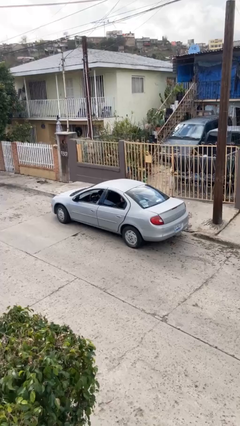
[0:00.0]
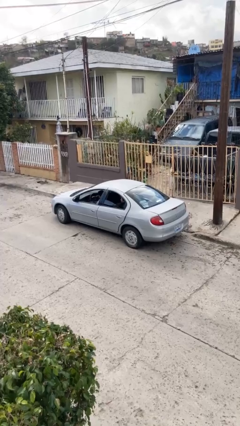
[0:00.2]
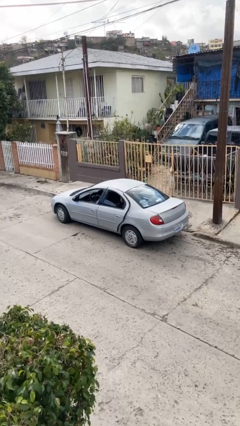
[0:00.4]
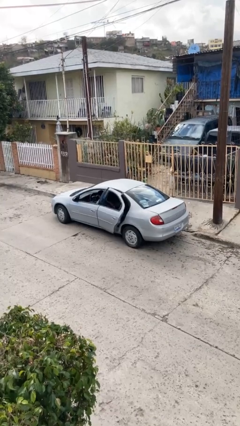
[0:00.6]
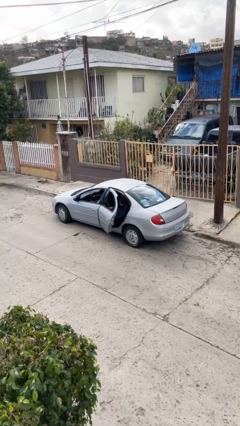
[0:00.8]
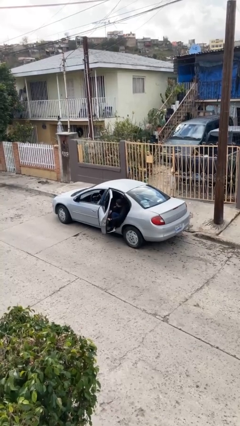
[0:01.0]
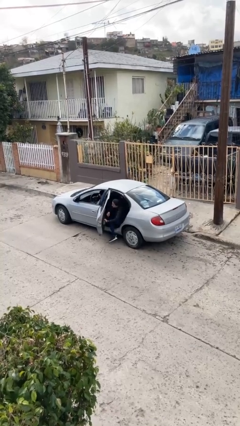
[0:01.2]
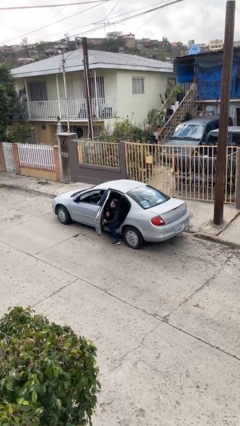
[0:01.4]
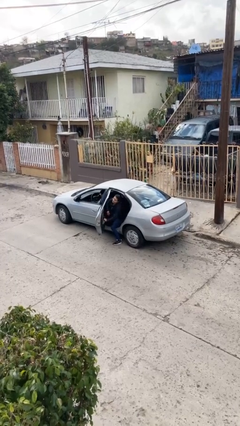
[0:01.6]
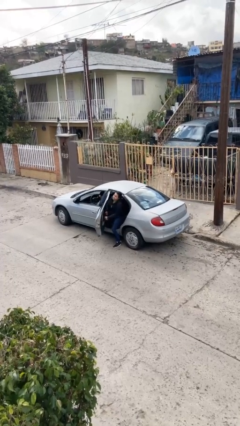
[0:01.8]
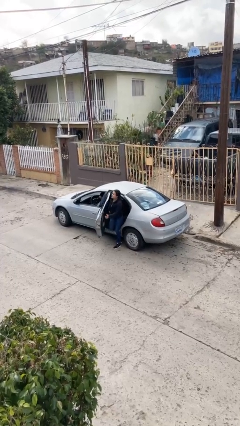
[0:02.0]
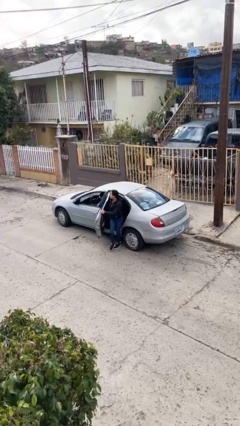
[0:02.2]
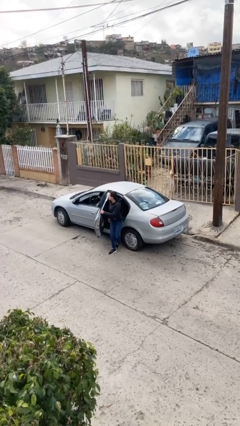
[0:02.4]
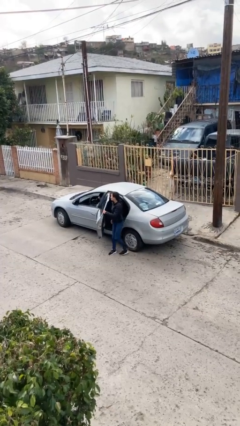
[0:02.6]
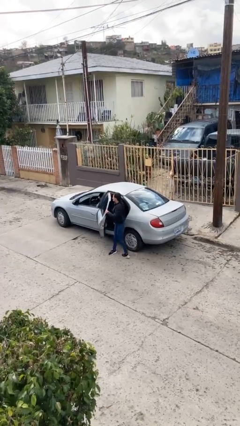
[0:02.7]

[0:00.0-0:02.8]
car drops off person

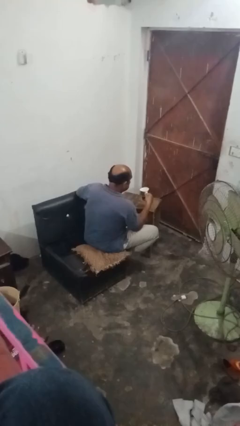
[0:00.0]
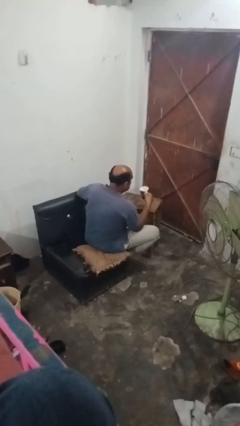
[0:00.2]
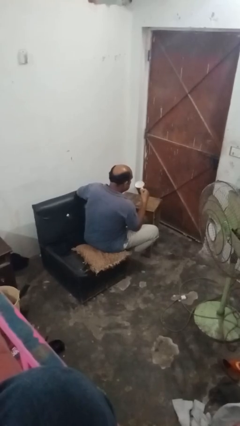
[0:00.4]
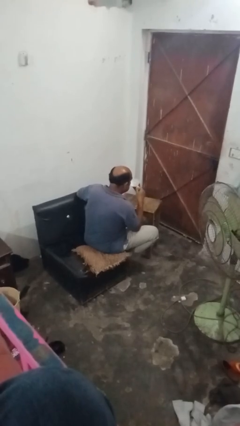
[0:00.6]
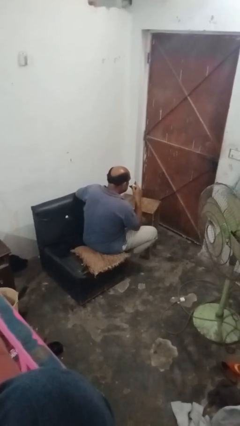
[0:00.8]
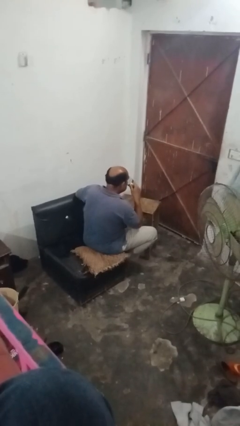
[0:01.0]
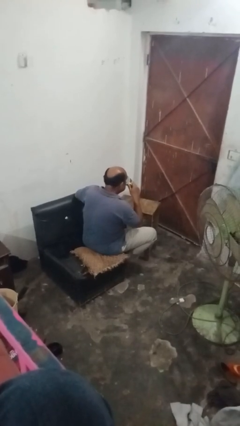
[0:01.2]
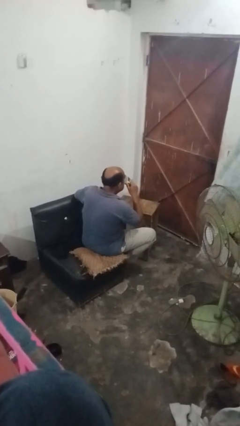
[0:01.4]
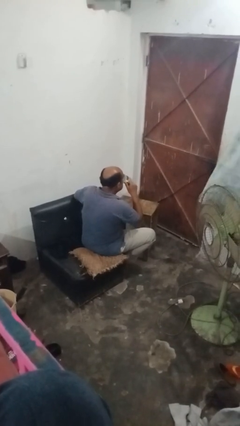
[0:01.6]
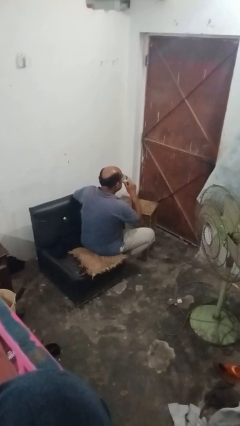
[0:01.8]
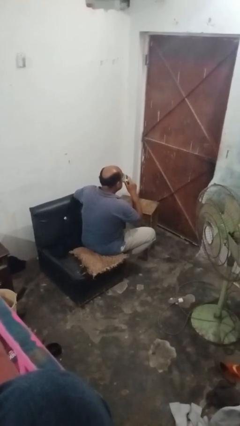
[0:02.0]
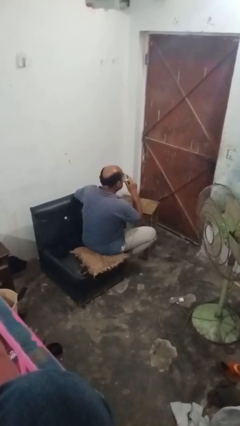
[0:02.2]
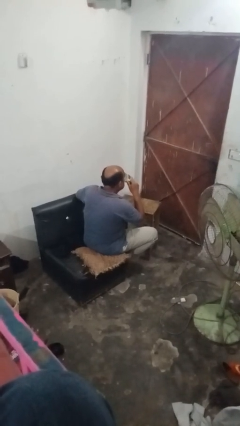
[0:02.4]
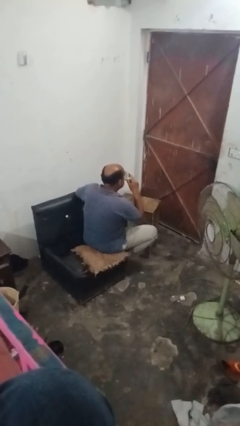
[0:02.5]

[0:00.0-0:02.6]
person drinks from mug

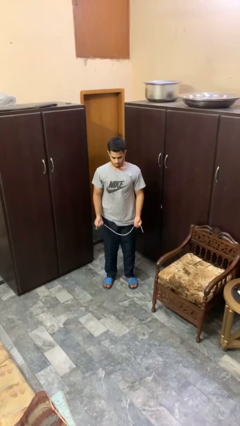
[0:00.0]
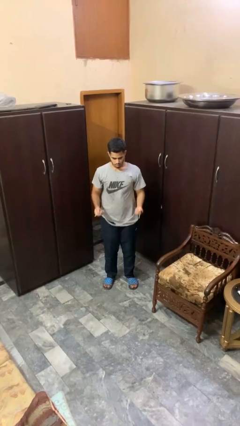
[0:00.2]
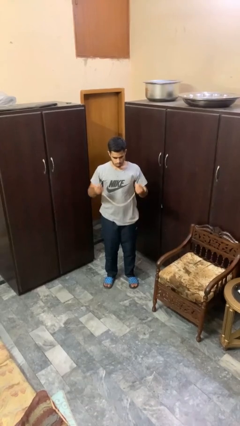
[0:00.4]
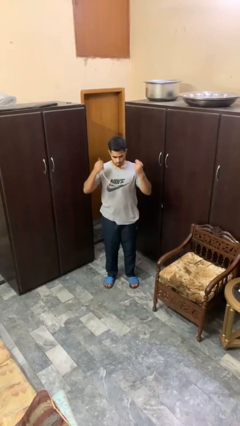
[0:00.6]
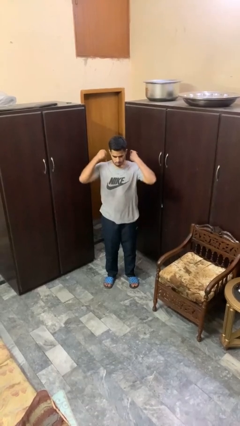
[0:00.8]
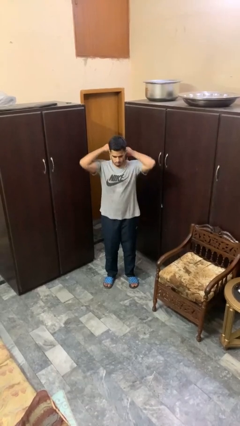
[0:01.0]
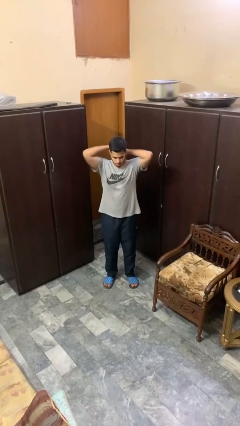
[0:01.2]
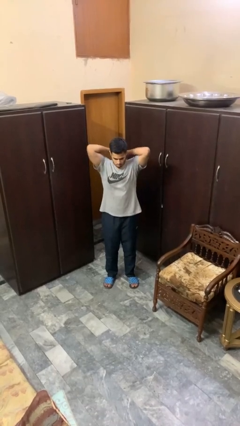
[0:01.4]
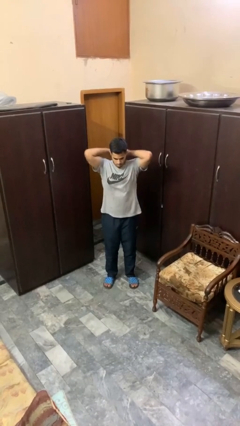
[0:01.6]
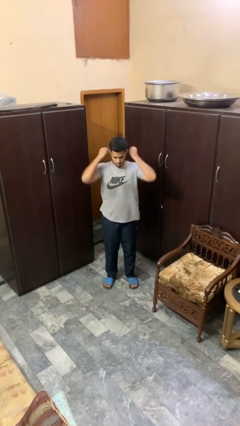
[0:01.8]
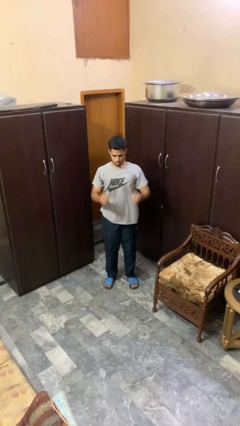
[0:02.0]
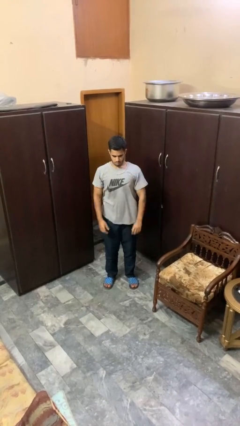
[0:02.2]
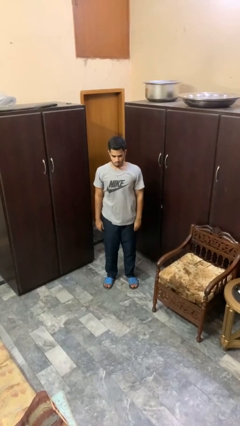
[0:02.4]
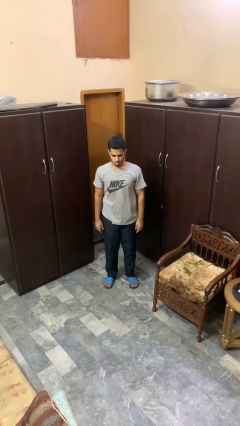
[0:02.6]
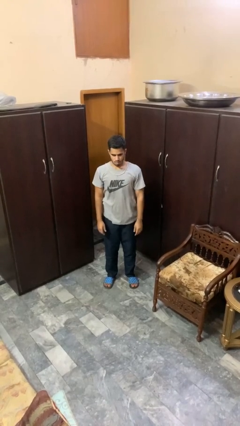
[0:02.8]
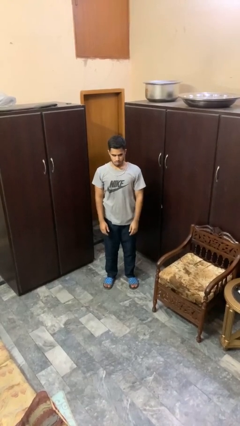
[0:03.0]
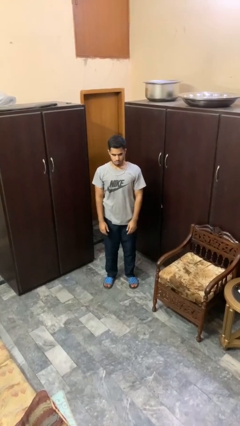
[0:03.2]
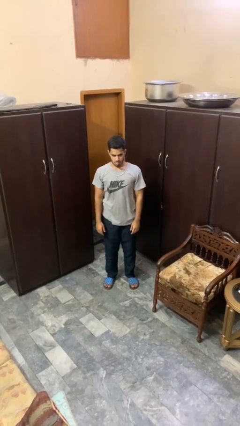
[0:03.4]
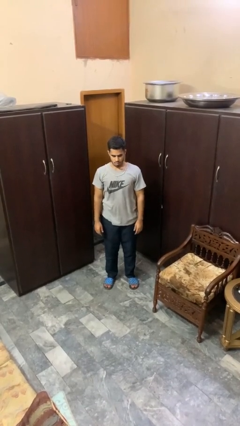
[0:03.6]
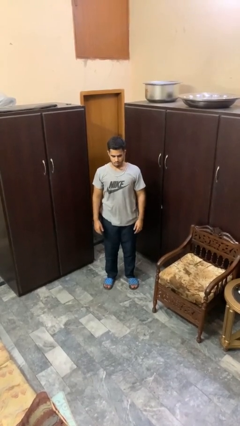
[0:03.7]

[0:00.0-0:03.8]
person puts on necklace

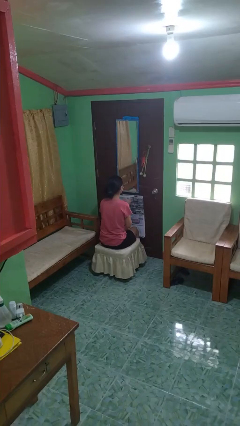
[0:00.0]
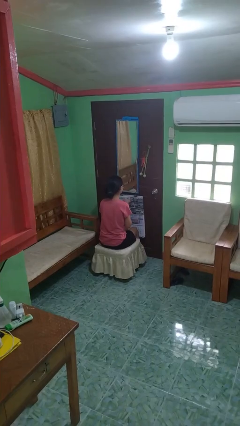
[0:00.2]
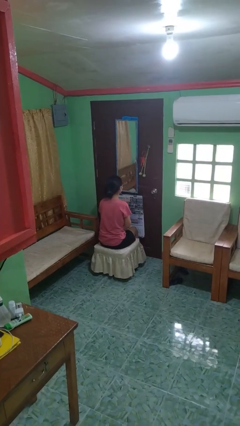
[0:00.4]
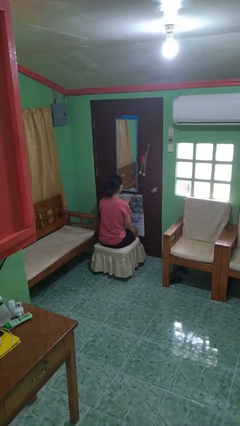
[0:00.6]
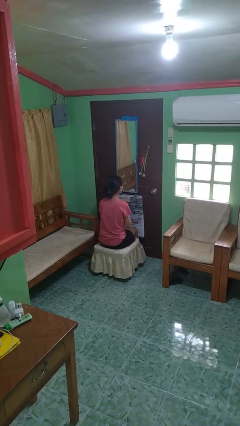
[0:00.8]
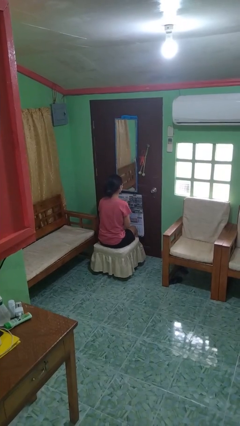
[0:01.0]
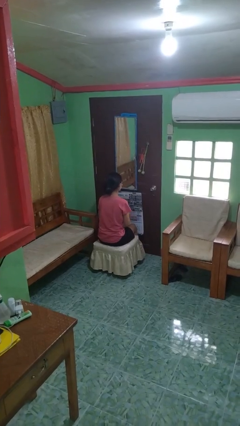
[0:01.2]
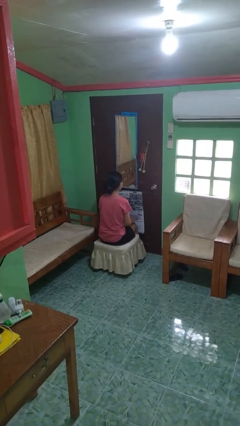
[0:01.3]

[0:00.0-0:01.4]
person claps hands

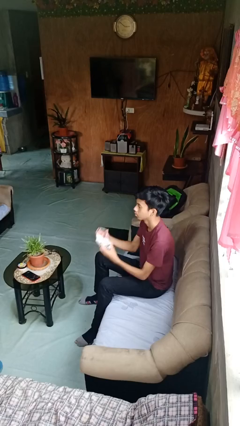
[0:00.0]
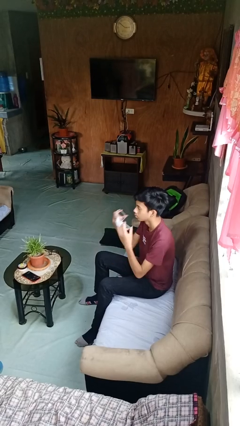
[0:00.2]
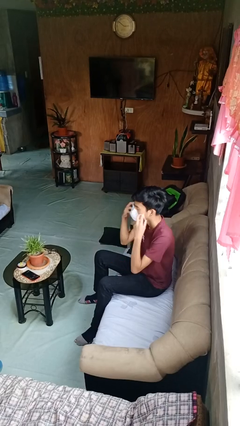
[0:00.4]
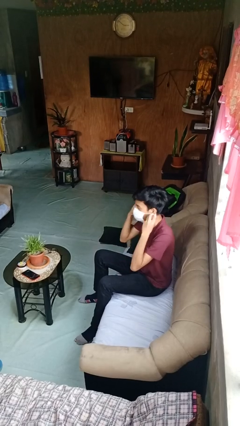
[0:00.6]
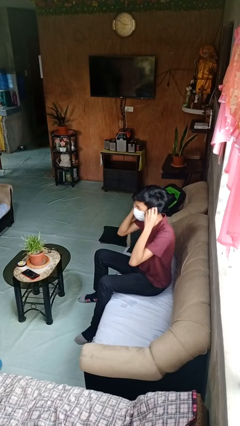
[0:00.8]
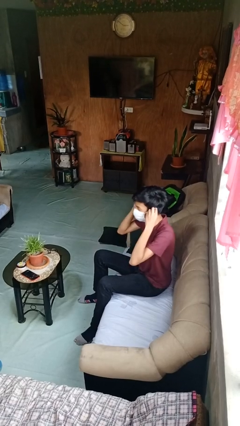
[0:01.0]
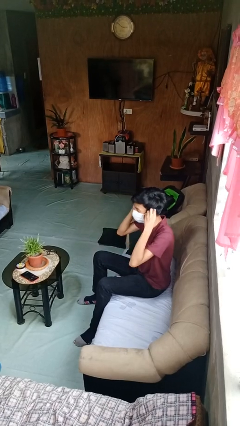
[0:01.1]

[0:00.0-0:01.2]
person puts on facemask

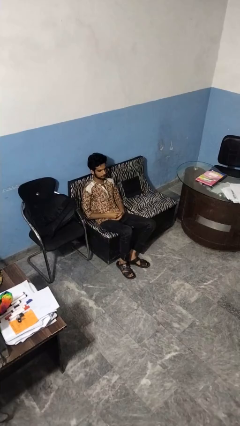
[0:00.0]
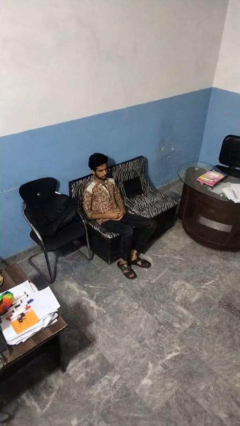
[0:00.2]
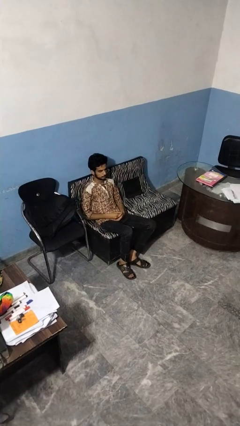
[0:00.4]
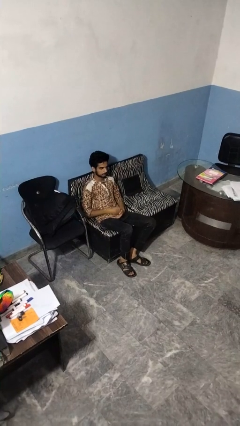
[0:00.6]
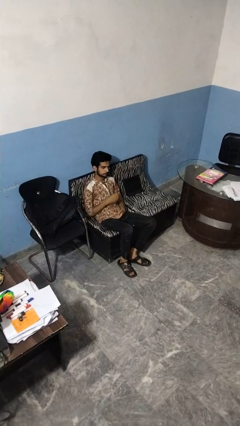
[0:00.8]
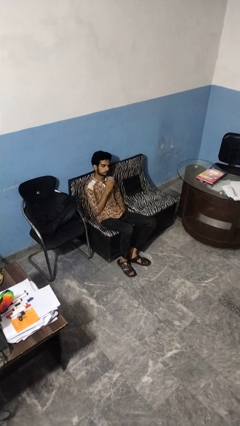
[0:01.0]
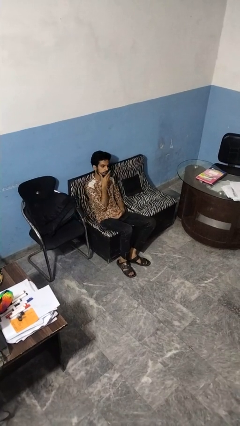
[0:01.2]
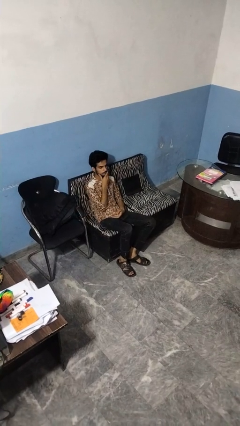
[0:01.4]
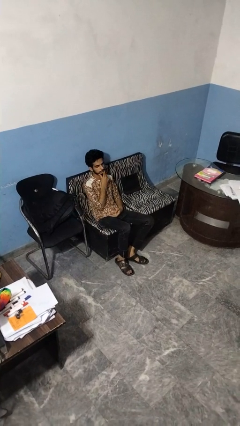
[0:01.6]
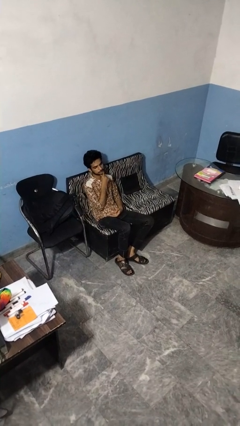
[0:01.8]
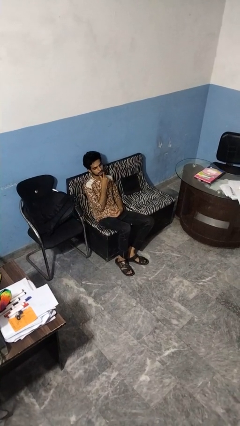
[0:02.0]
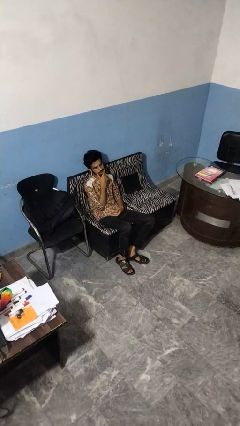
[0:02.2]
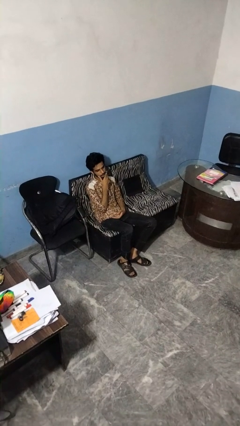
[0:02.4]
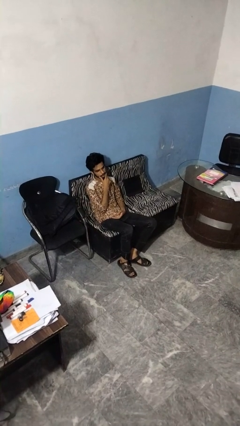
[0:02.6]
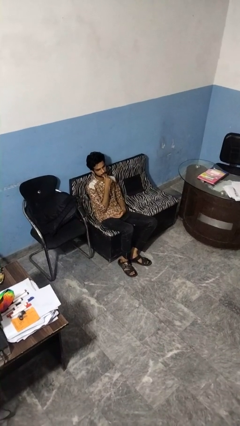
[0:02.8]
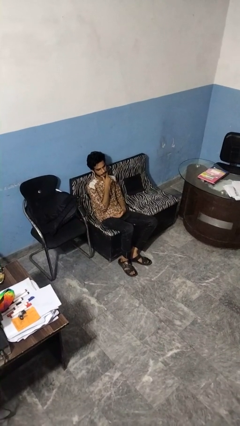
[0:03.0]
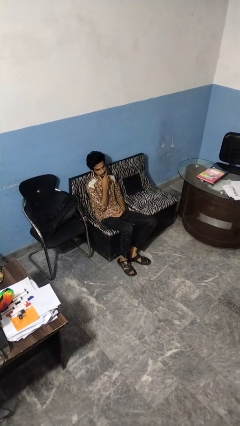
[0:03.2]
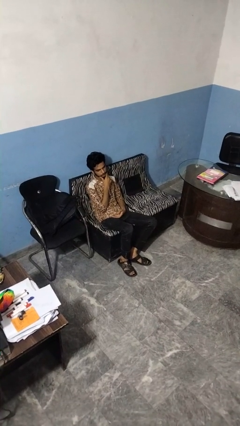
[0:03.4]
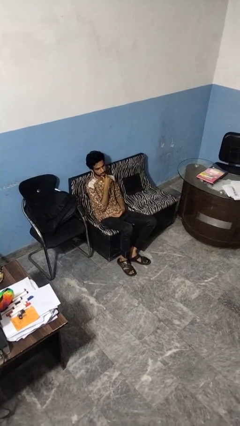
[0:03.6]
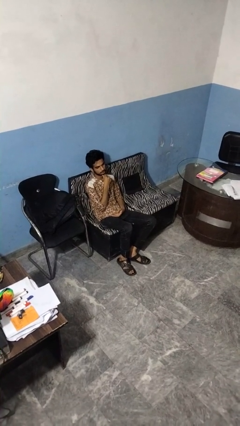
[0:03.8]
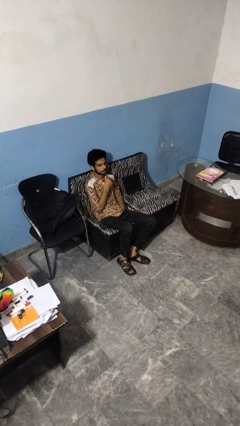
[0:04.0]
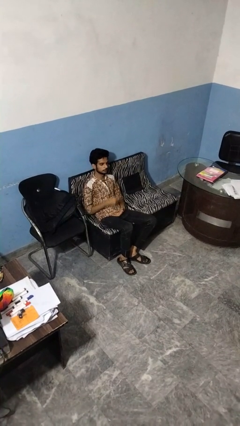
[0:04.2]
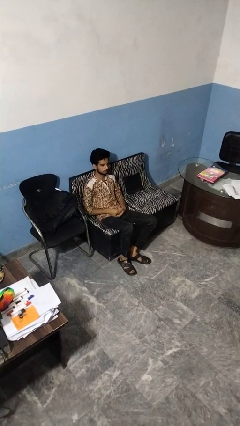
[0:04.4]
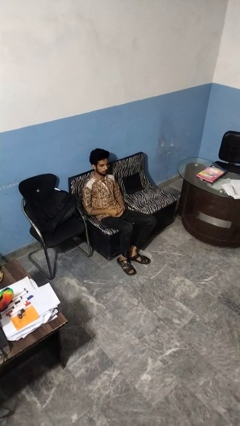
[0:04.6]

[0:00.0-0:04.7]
person strokes chin

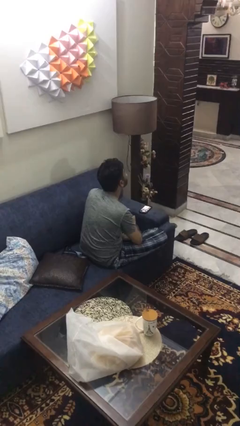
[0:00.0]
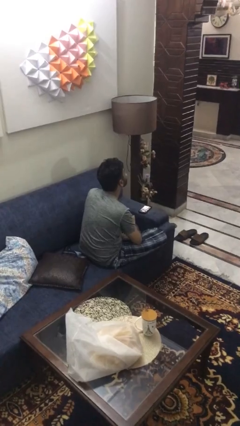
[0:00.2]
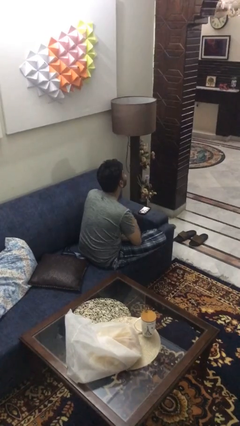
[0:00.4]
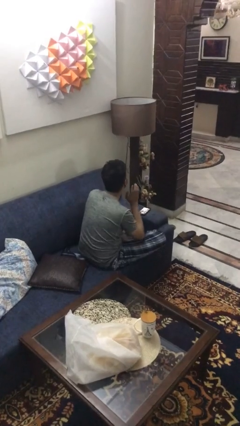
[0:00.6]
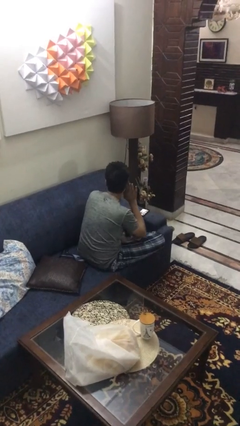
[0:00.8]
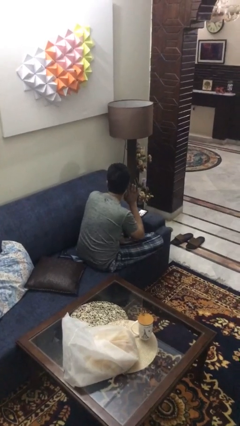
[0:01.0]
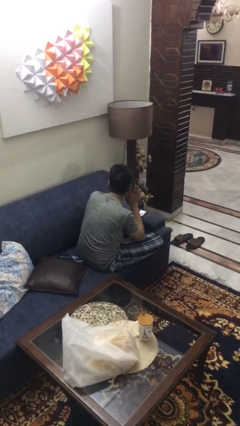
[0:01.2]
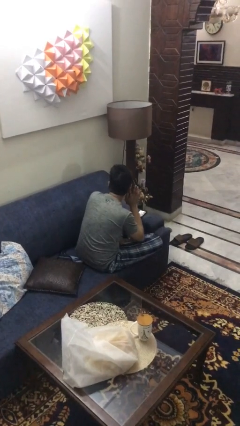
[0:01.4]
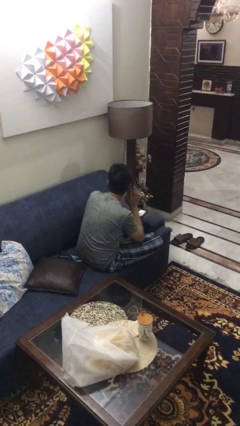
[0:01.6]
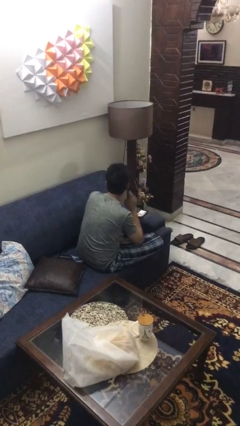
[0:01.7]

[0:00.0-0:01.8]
person gestures listen closely
